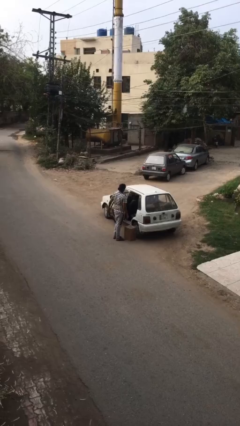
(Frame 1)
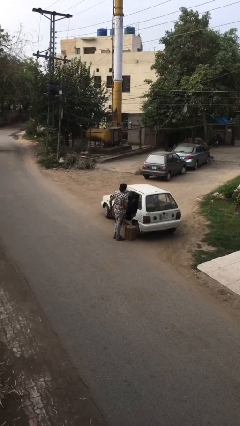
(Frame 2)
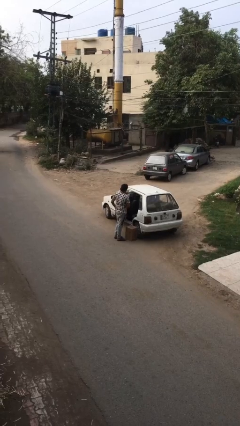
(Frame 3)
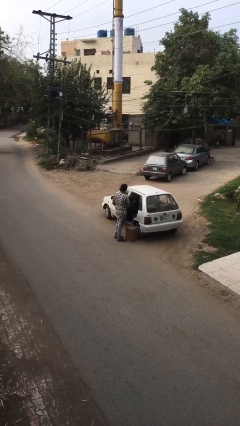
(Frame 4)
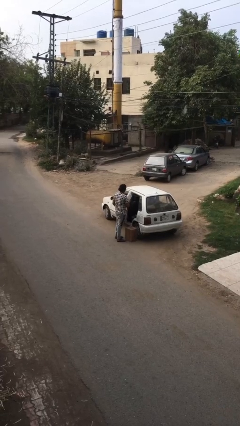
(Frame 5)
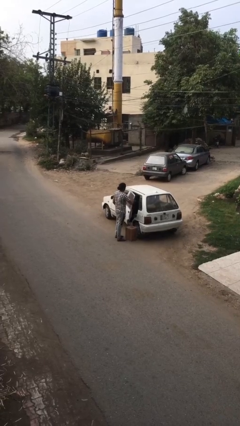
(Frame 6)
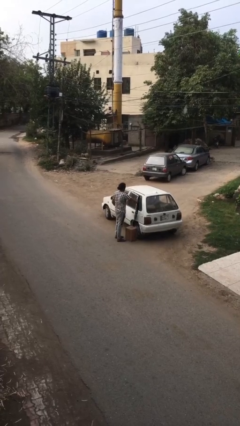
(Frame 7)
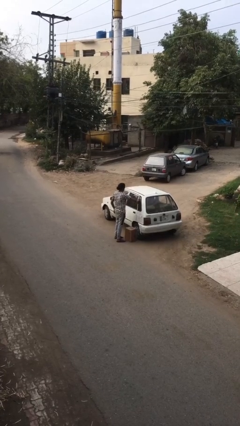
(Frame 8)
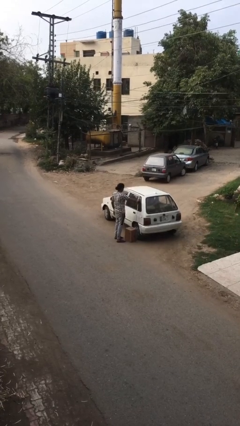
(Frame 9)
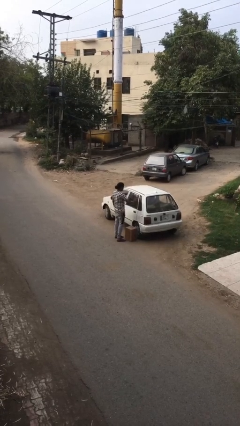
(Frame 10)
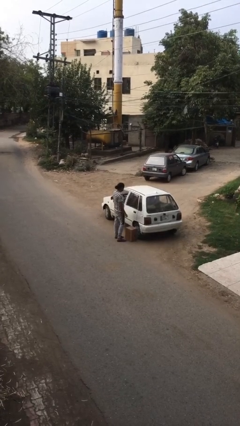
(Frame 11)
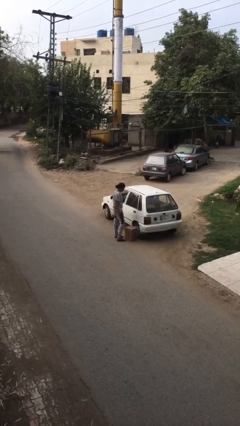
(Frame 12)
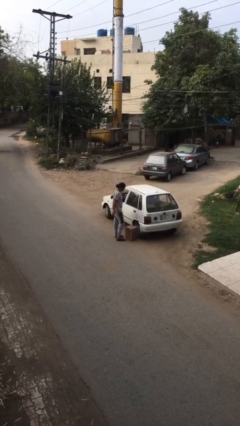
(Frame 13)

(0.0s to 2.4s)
person closes car door

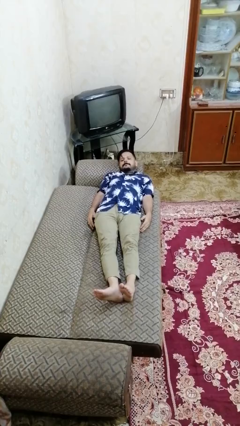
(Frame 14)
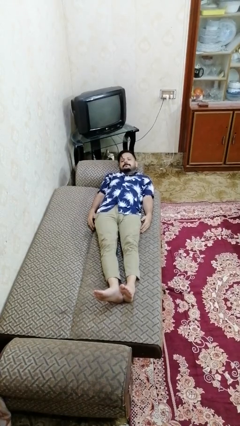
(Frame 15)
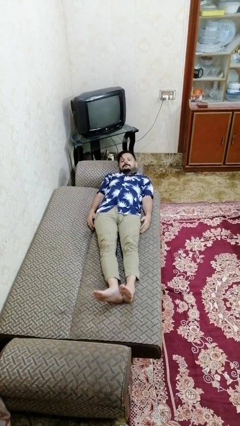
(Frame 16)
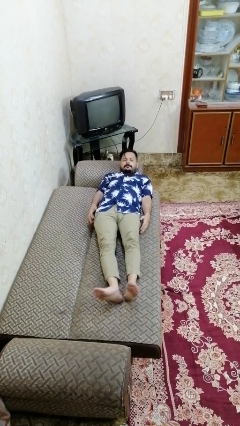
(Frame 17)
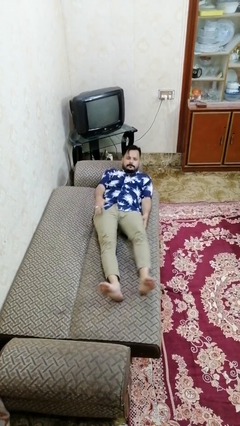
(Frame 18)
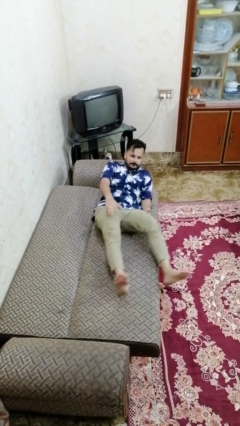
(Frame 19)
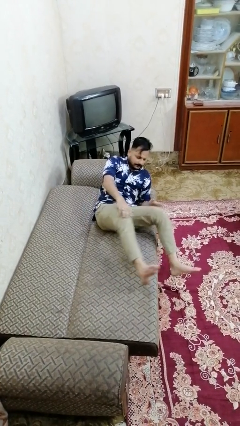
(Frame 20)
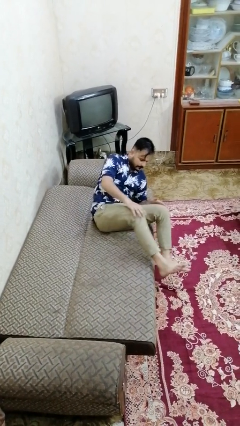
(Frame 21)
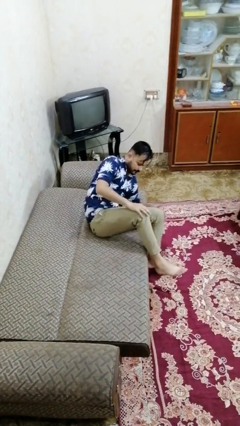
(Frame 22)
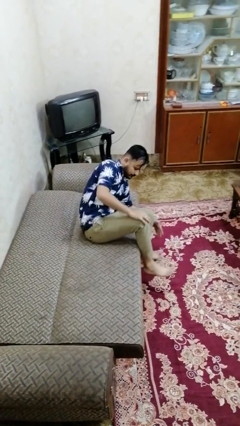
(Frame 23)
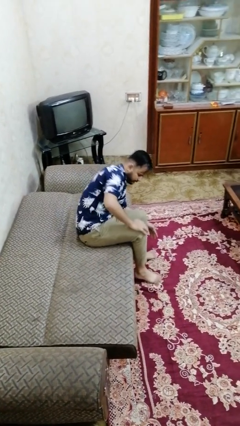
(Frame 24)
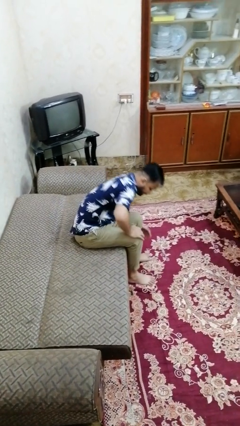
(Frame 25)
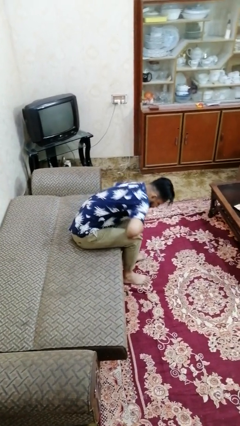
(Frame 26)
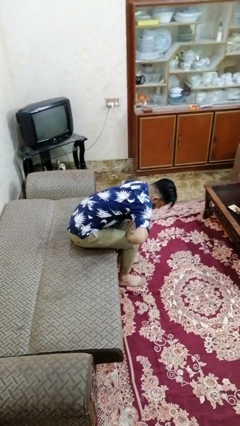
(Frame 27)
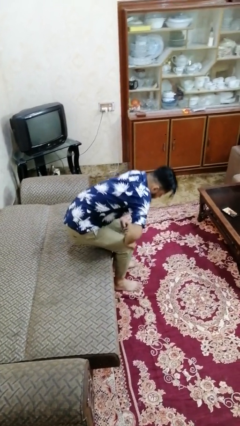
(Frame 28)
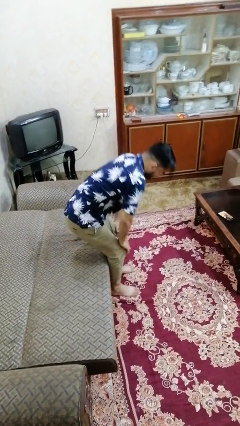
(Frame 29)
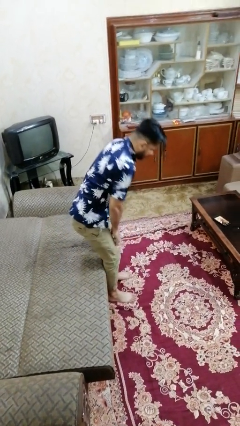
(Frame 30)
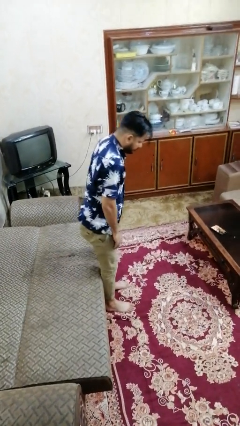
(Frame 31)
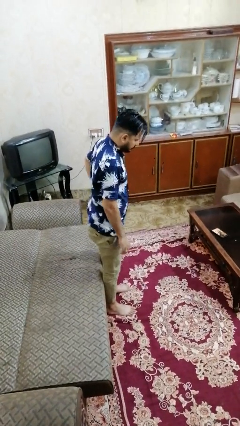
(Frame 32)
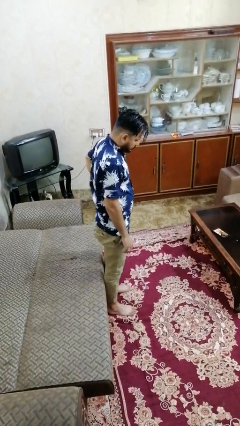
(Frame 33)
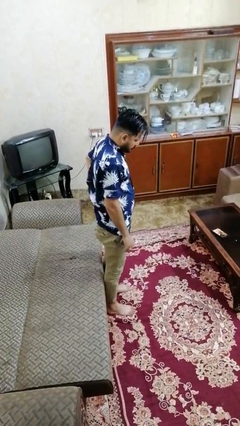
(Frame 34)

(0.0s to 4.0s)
person stands up

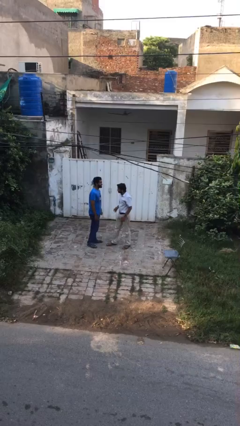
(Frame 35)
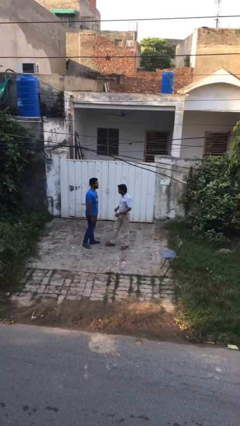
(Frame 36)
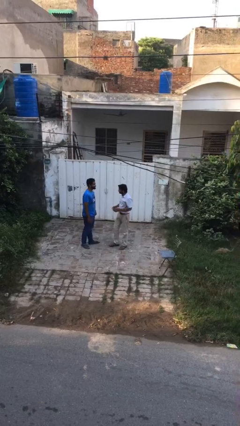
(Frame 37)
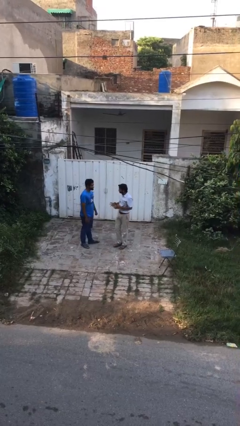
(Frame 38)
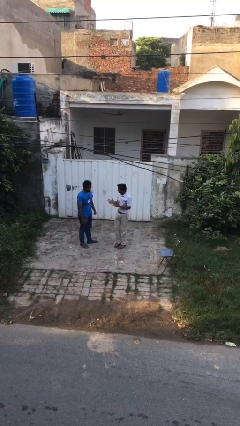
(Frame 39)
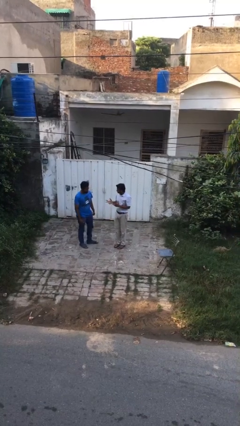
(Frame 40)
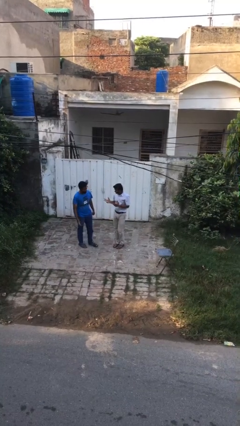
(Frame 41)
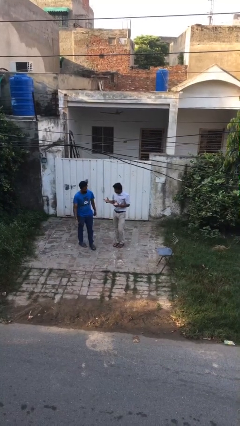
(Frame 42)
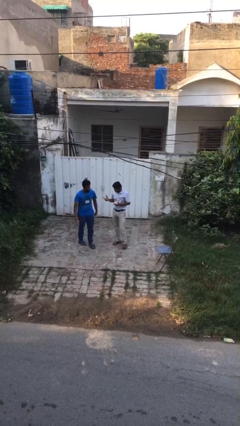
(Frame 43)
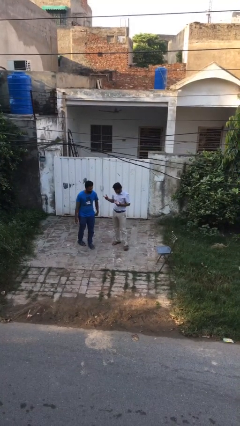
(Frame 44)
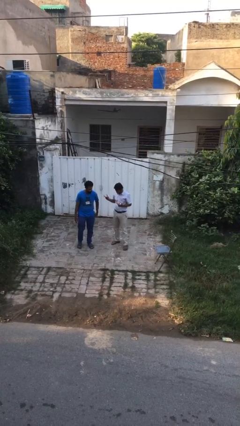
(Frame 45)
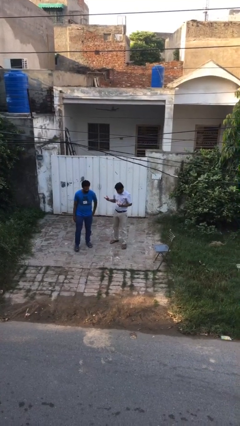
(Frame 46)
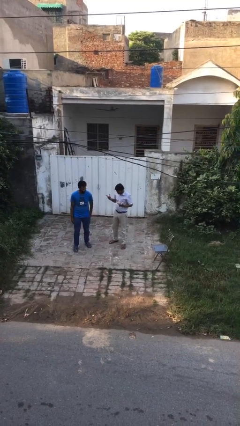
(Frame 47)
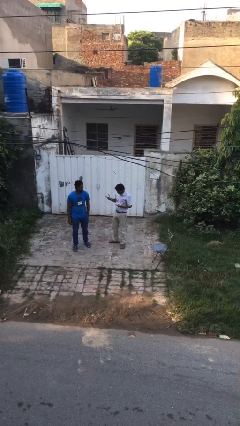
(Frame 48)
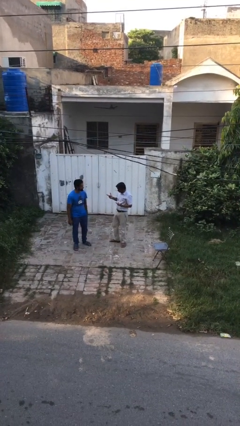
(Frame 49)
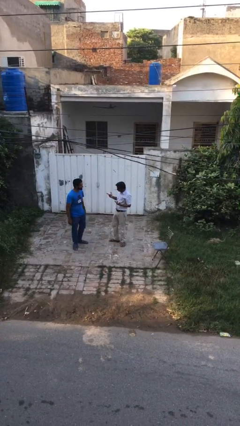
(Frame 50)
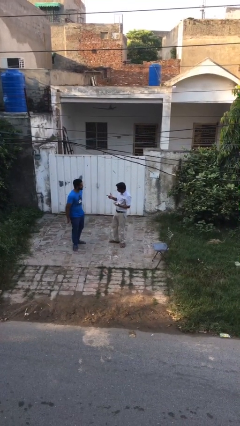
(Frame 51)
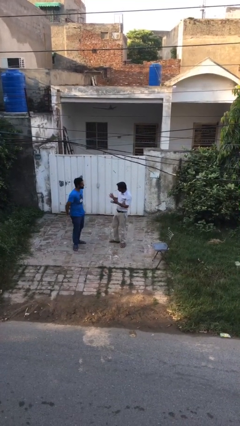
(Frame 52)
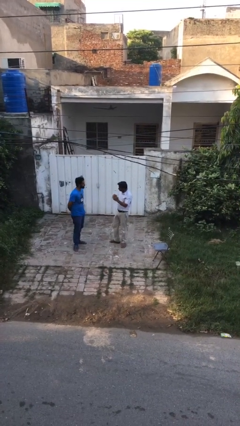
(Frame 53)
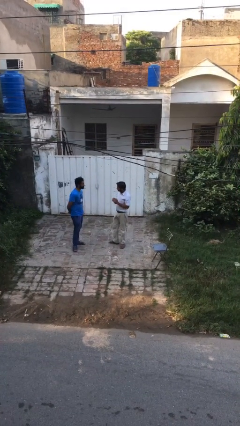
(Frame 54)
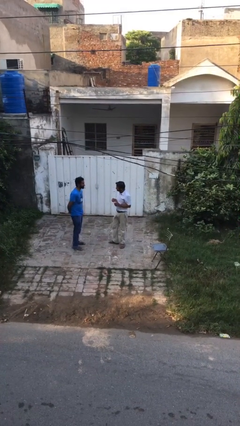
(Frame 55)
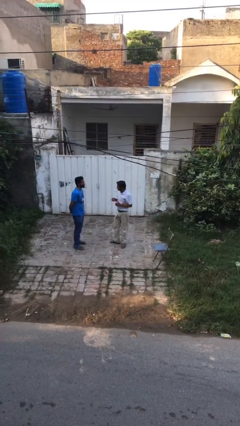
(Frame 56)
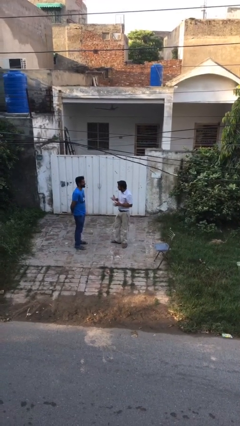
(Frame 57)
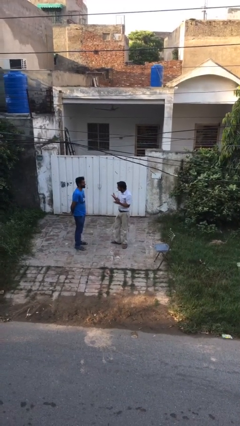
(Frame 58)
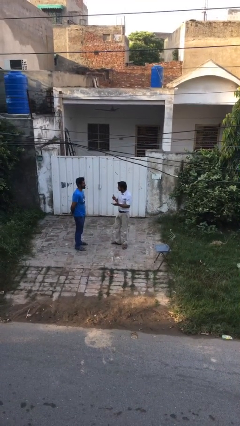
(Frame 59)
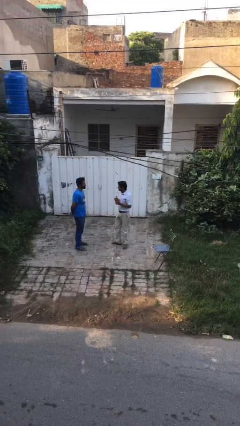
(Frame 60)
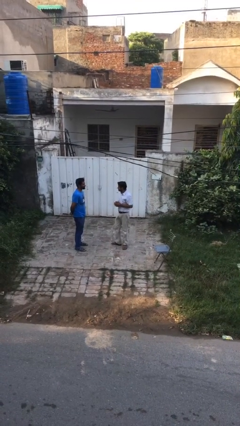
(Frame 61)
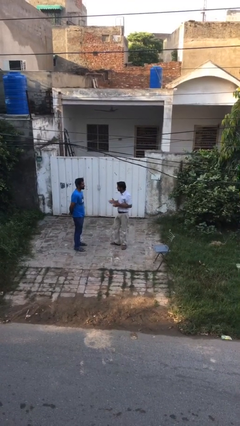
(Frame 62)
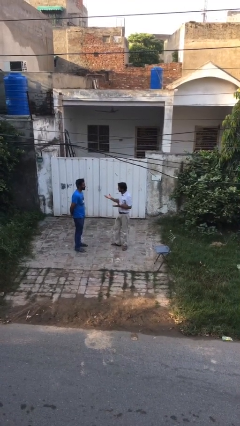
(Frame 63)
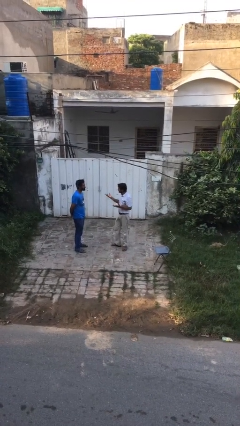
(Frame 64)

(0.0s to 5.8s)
person talks to person

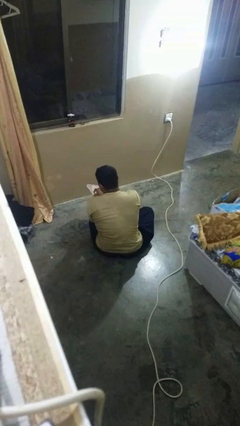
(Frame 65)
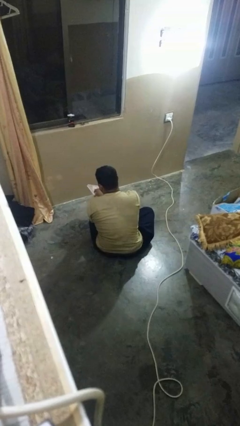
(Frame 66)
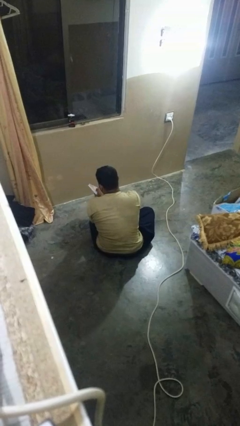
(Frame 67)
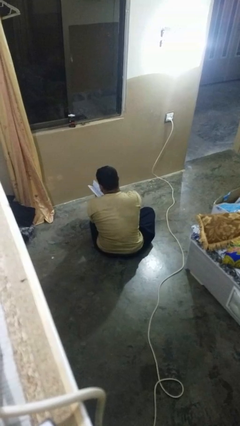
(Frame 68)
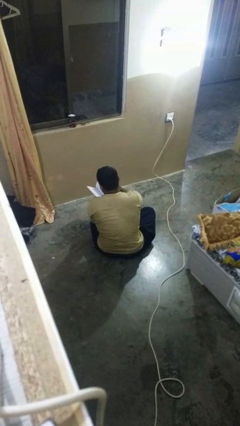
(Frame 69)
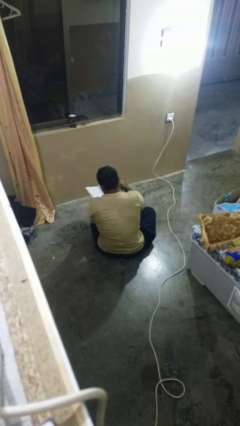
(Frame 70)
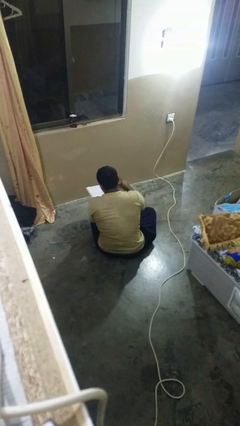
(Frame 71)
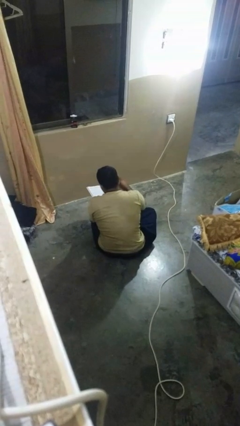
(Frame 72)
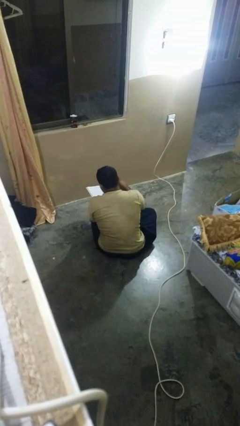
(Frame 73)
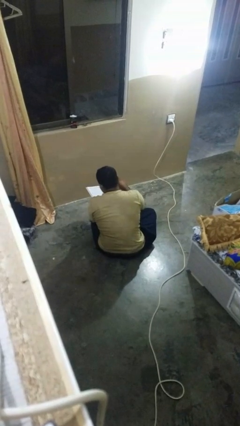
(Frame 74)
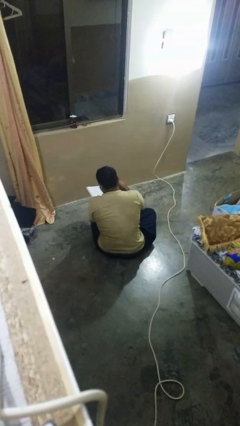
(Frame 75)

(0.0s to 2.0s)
person reads book

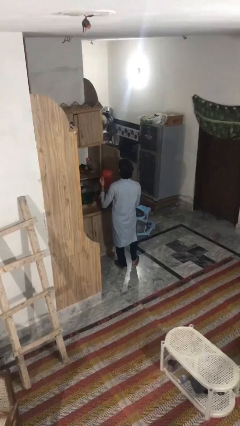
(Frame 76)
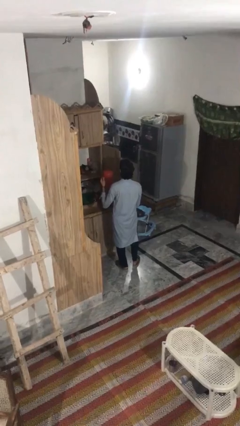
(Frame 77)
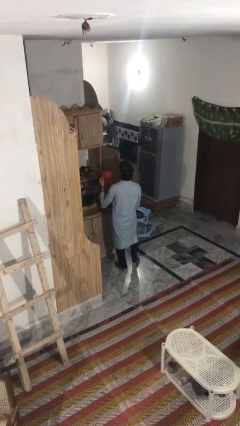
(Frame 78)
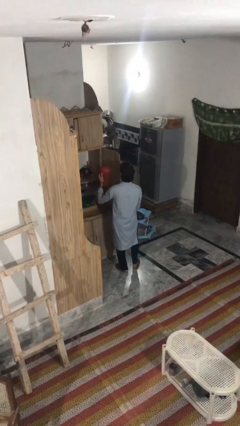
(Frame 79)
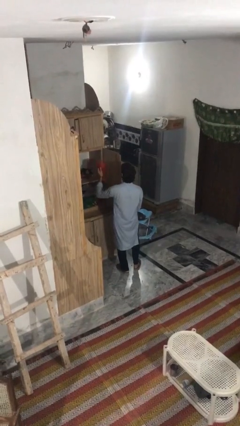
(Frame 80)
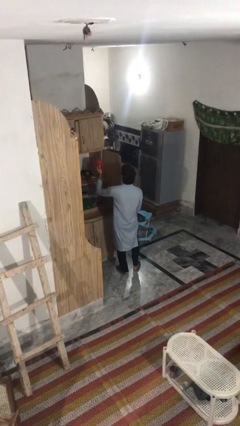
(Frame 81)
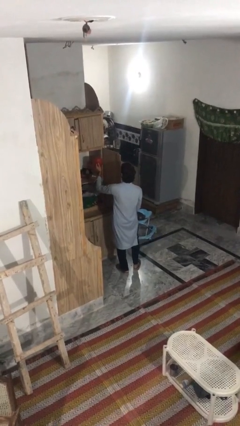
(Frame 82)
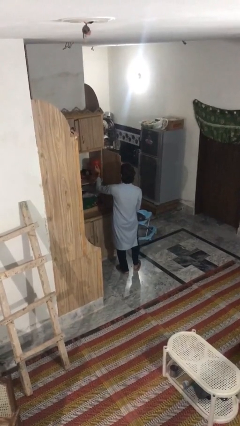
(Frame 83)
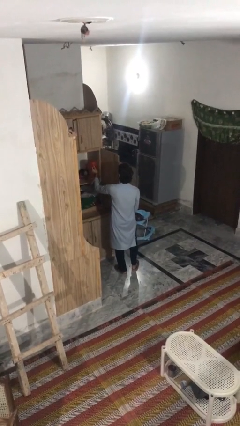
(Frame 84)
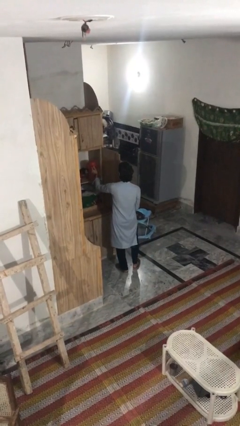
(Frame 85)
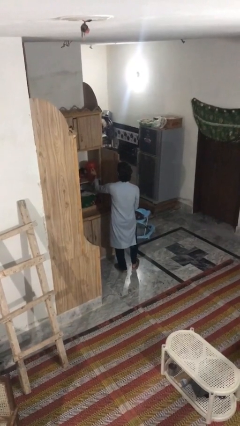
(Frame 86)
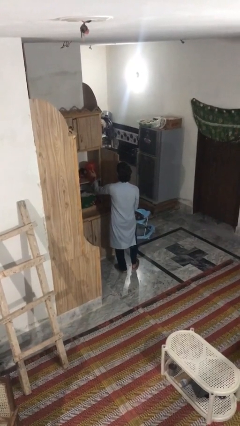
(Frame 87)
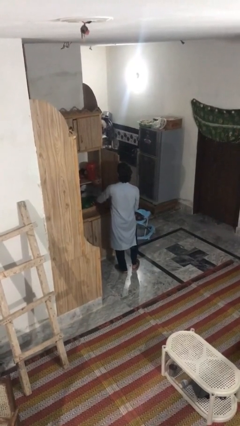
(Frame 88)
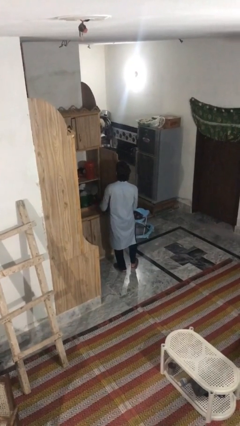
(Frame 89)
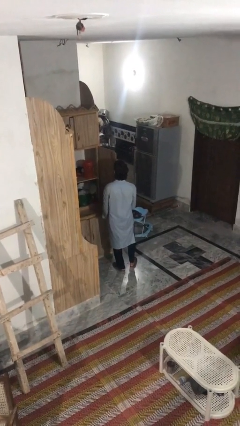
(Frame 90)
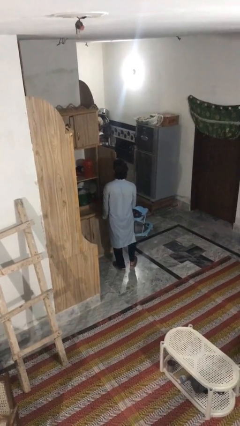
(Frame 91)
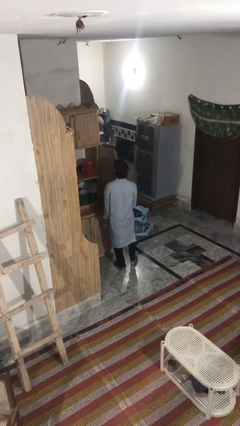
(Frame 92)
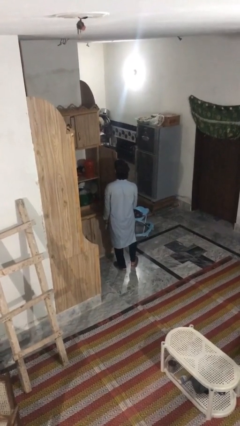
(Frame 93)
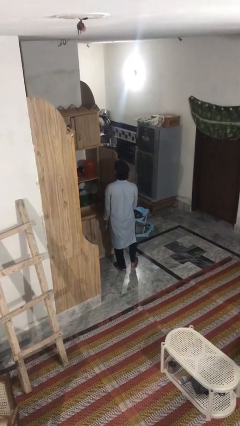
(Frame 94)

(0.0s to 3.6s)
person puts down object into cabinet
